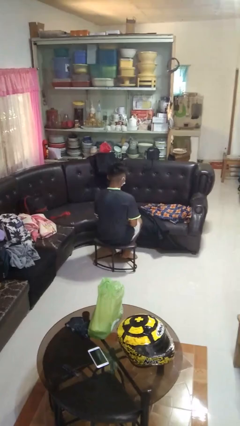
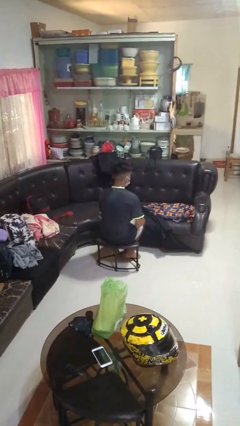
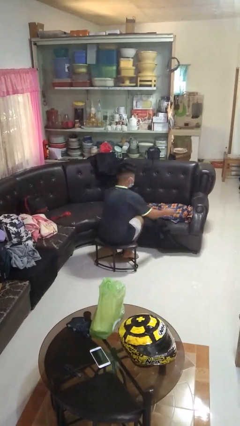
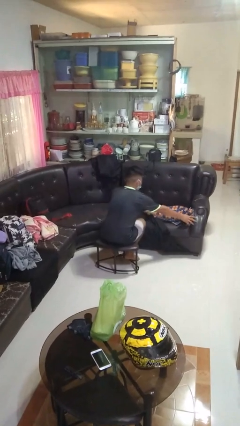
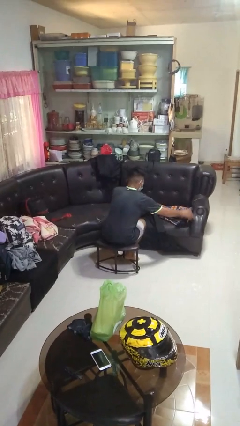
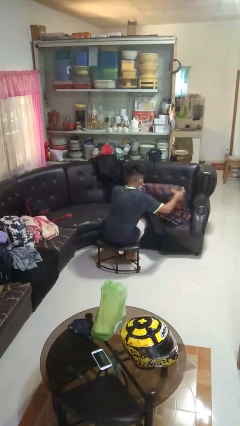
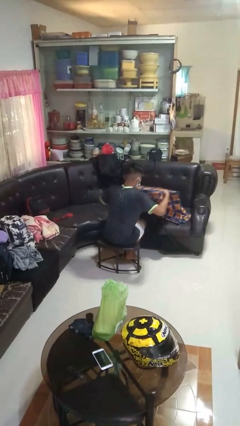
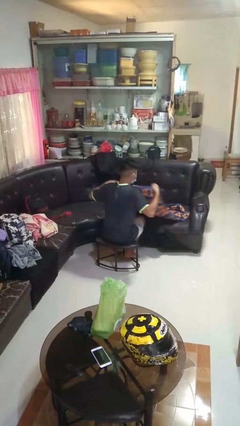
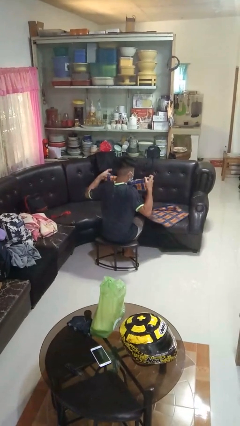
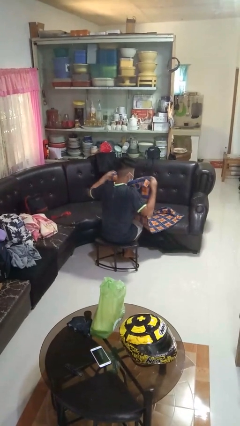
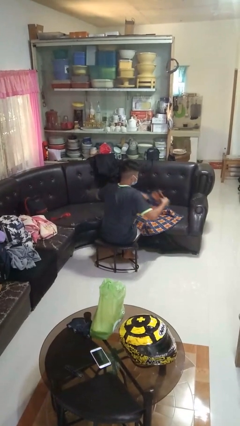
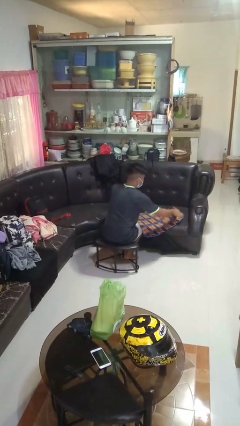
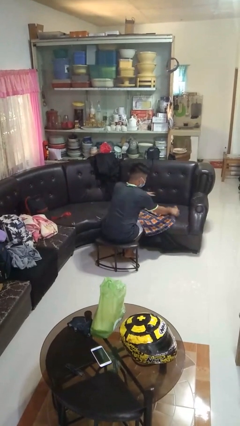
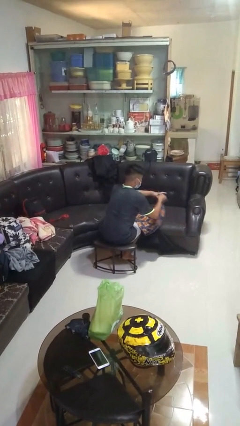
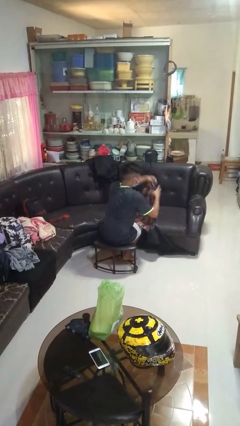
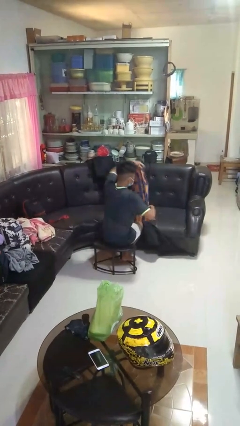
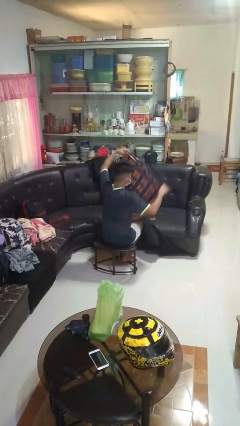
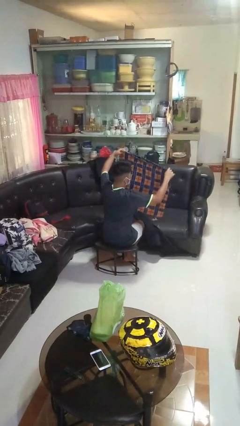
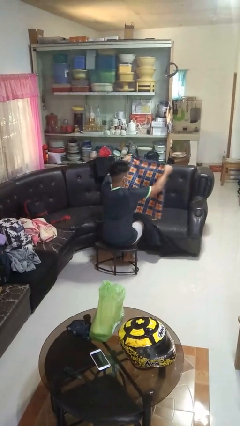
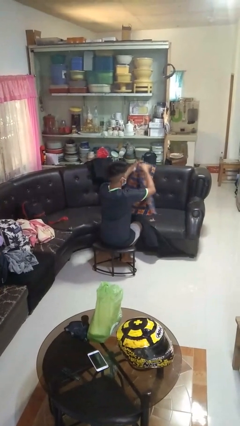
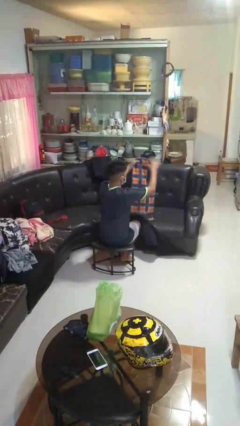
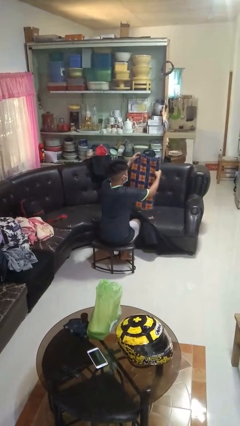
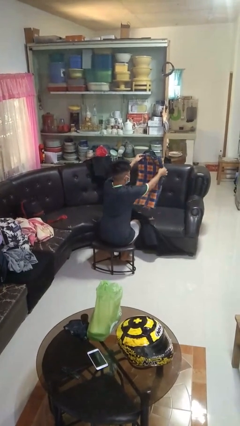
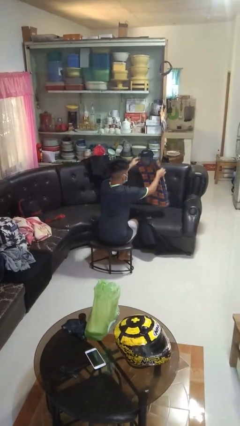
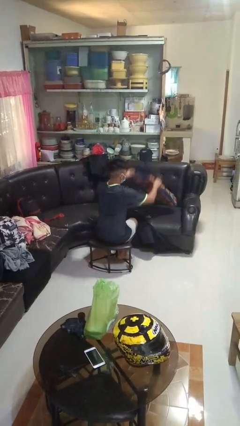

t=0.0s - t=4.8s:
person folds blanket

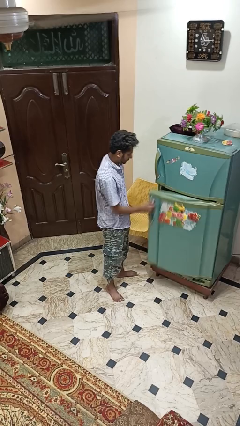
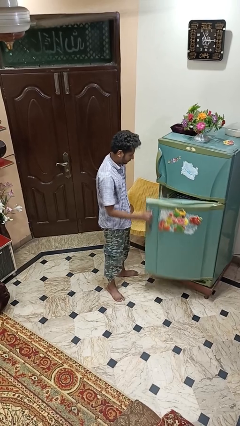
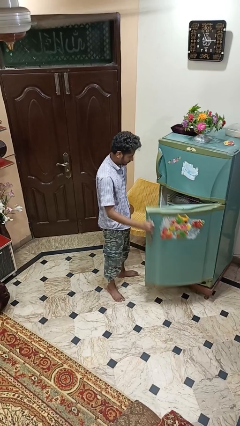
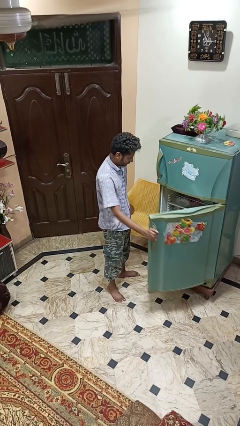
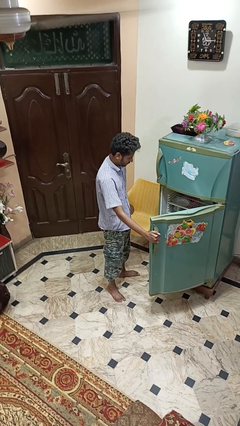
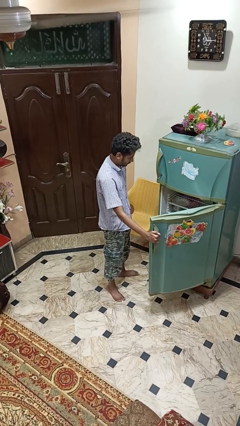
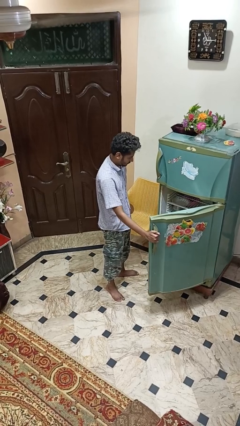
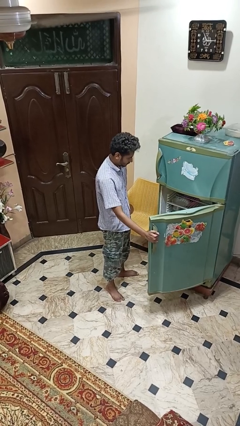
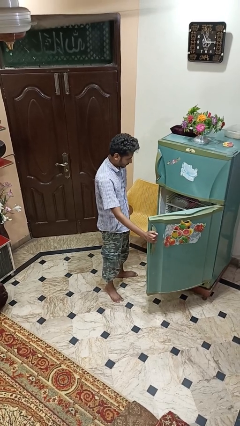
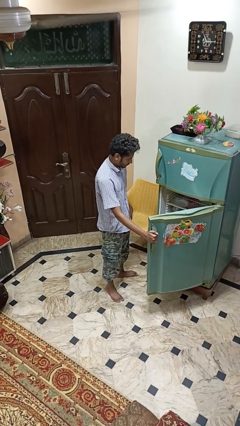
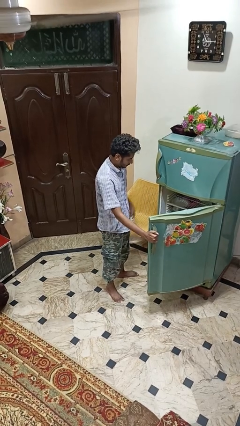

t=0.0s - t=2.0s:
person opens refrigerator

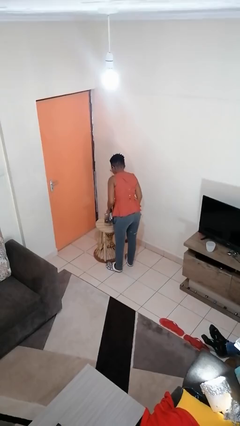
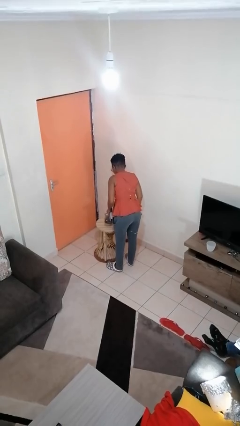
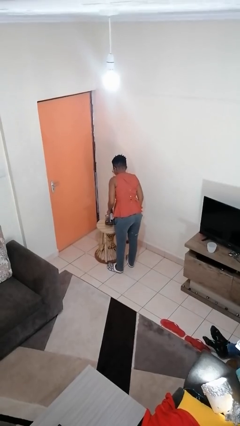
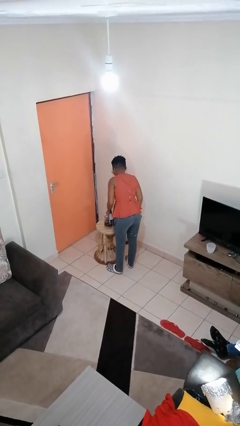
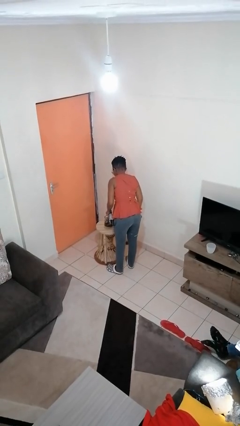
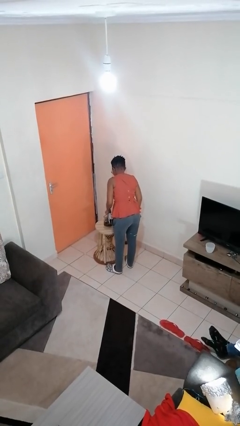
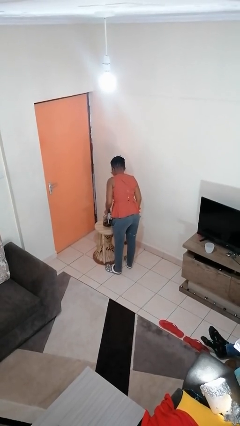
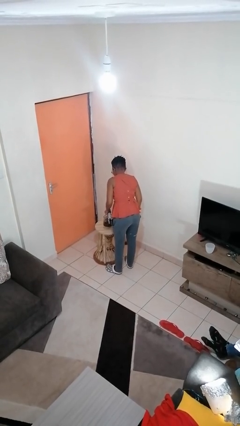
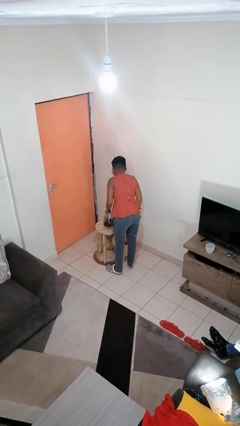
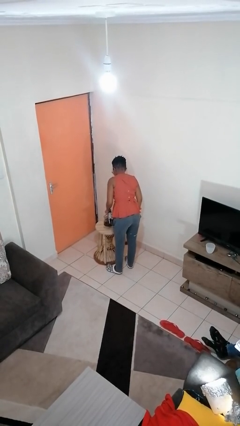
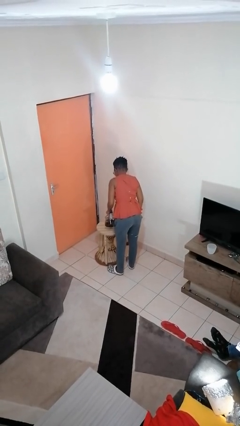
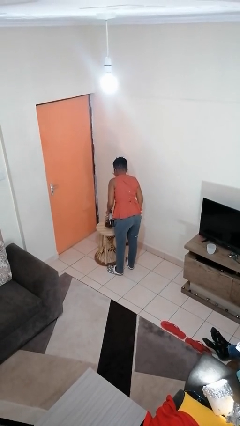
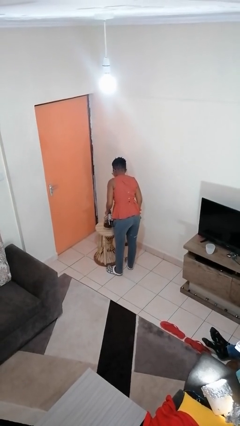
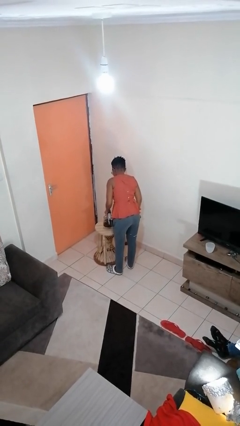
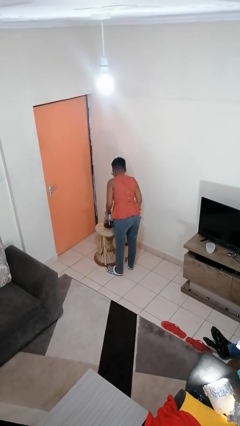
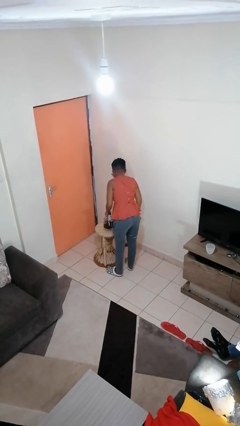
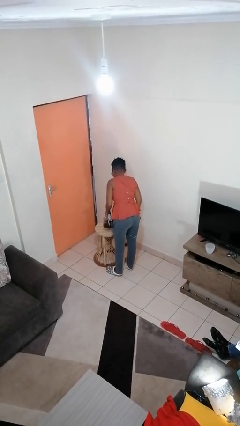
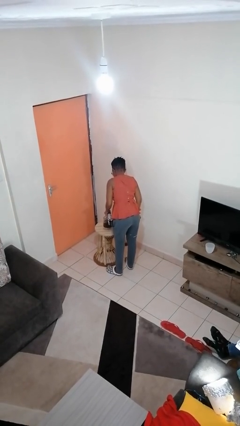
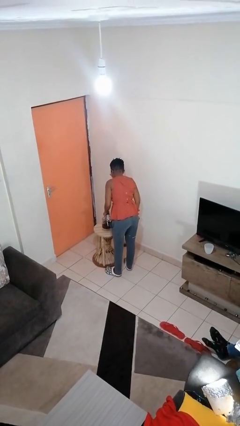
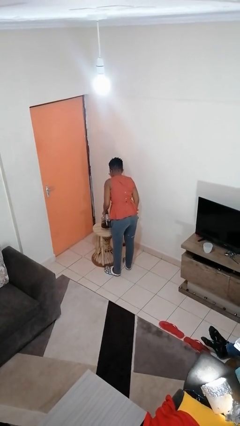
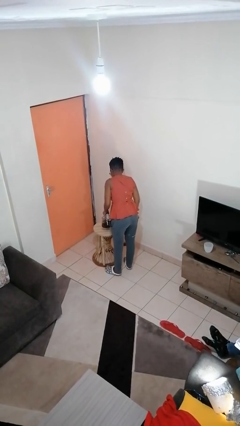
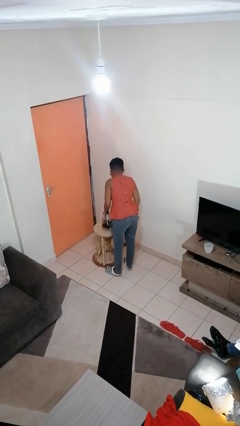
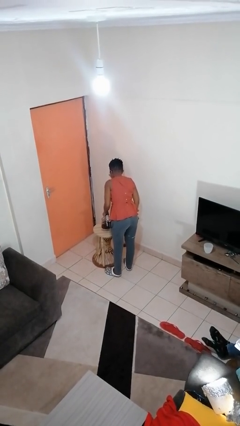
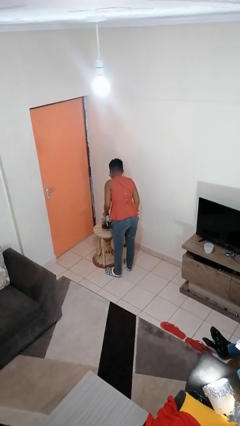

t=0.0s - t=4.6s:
person pours coffee into mug

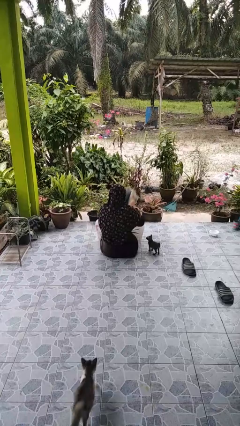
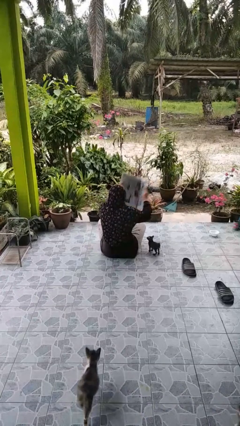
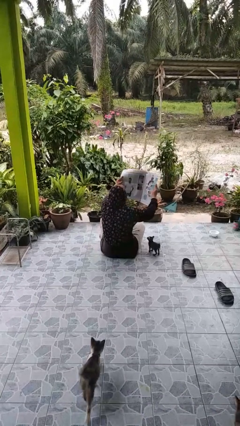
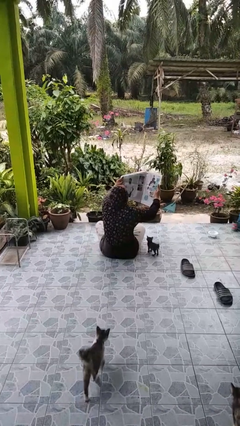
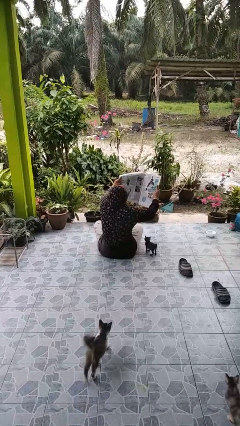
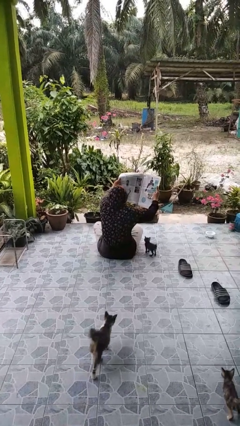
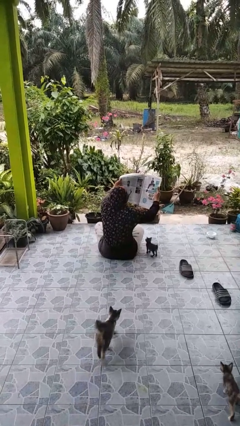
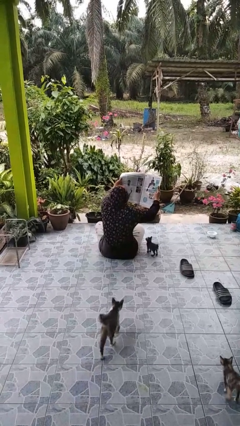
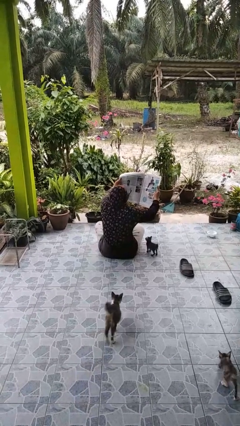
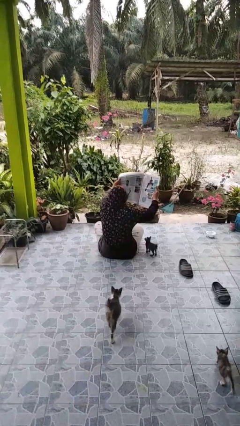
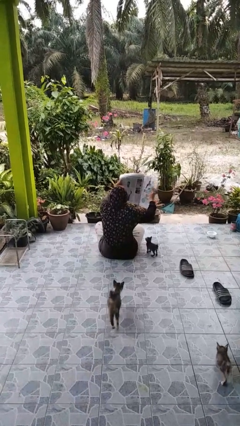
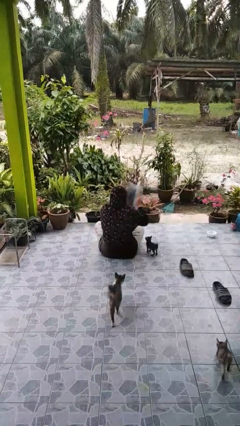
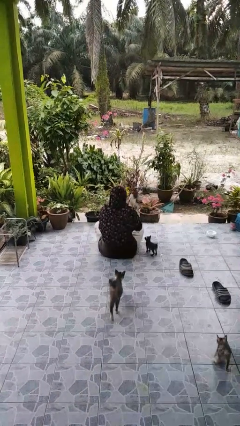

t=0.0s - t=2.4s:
person reads newspaper

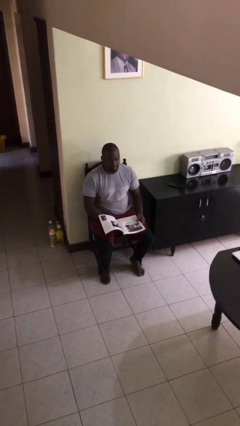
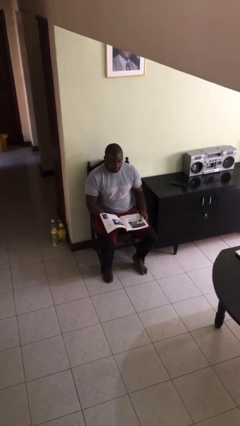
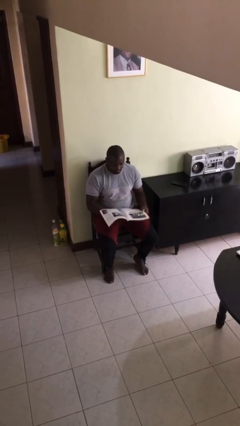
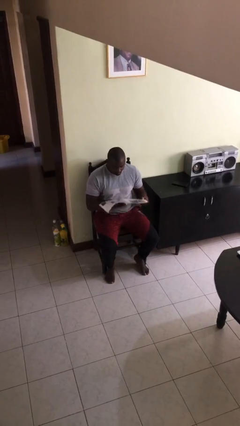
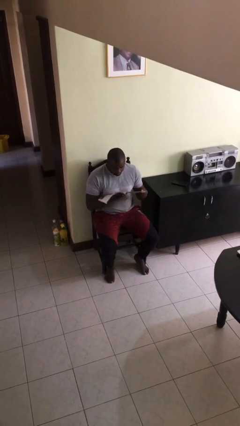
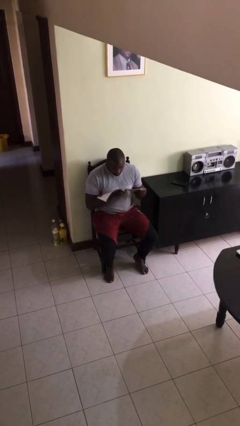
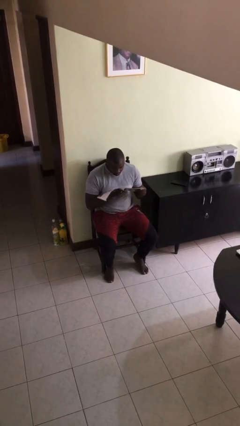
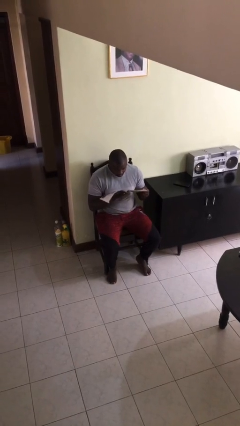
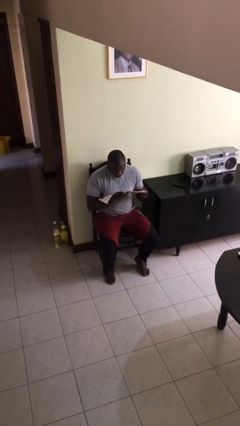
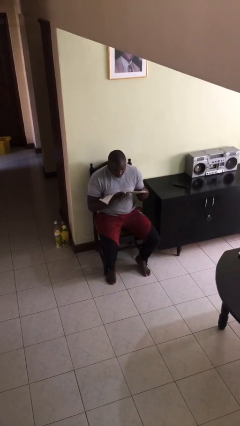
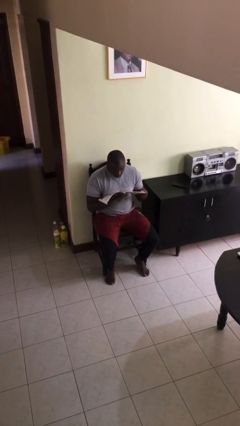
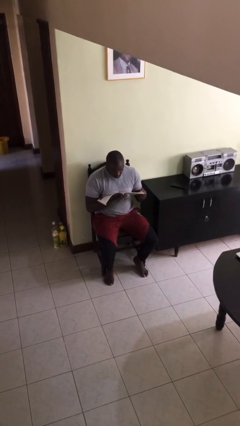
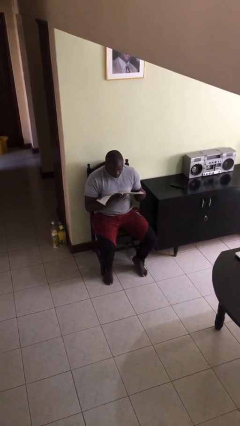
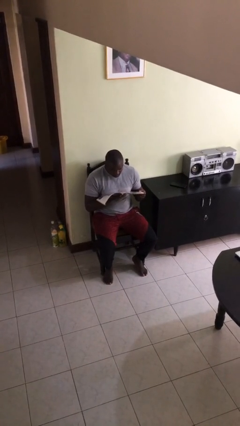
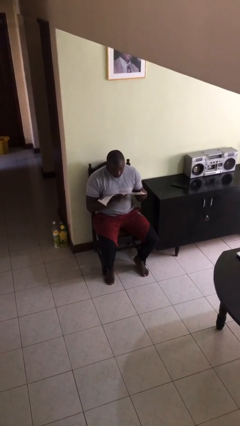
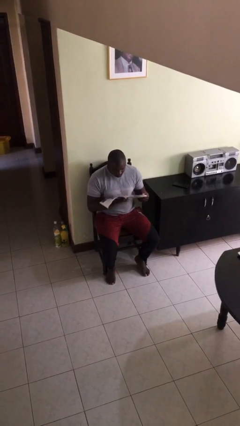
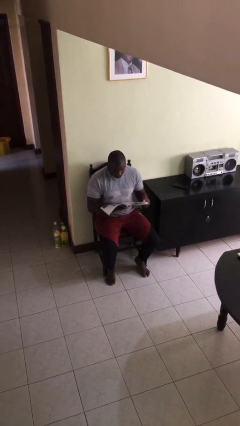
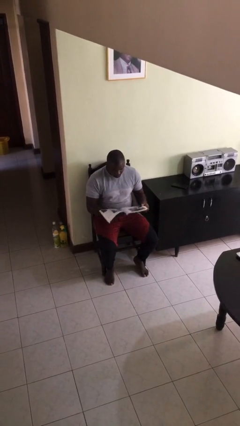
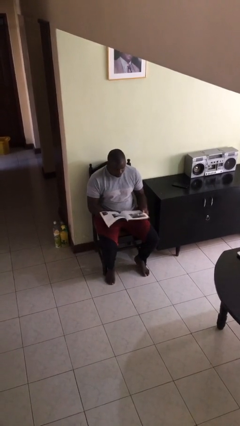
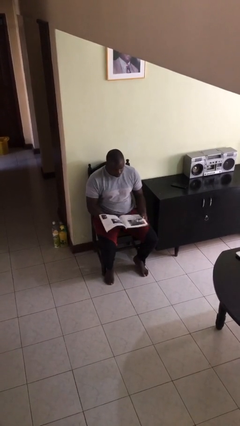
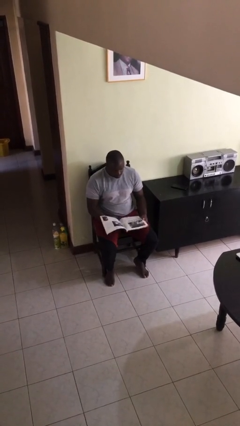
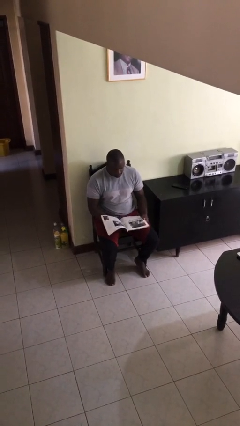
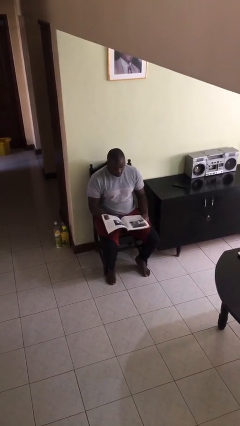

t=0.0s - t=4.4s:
person reads document
